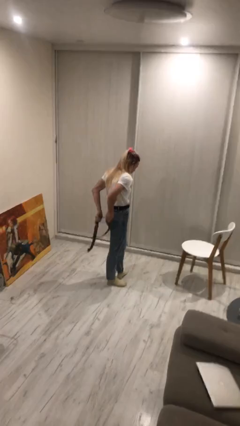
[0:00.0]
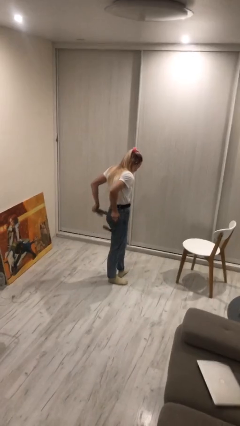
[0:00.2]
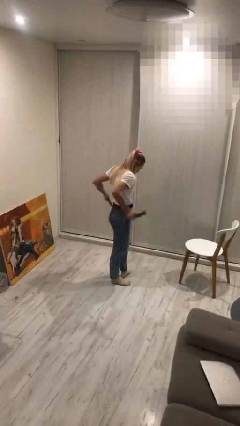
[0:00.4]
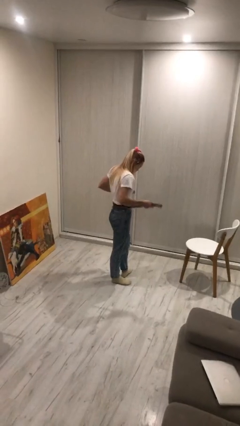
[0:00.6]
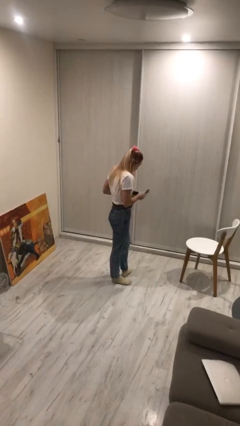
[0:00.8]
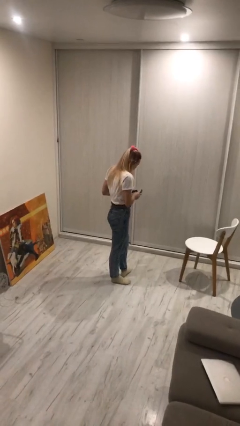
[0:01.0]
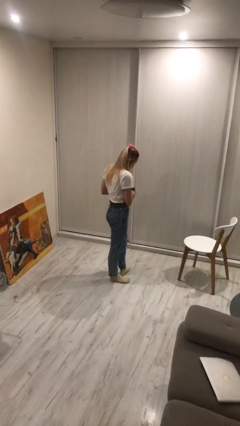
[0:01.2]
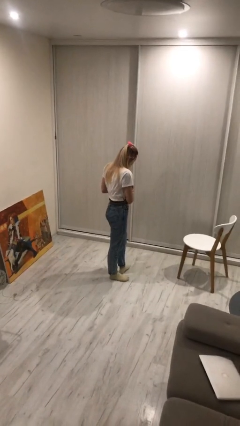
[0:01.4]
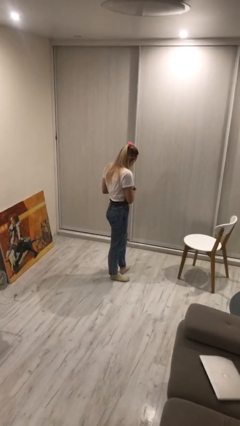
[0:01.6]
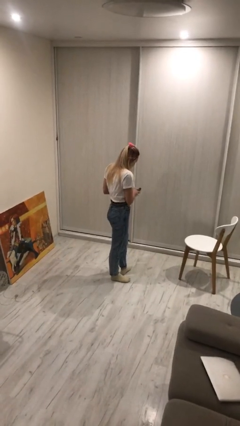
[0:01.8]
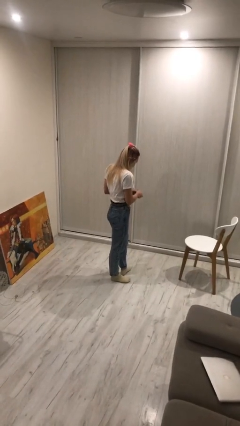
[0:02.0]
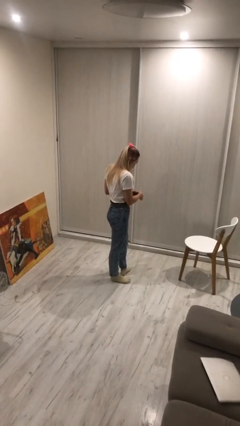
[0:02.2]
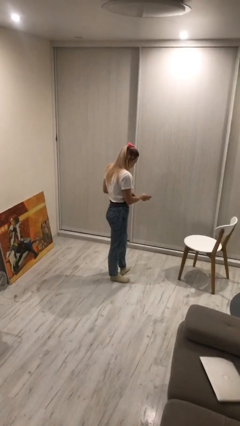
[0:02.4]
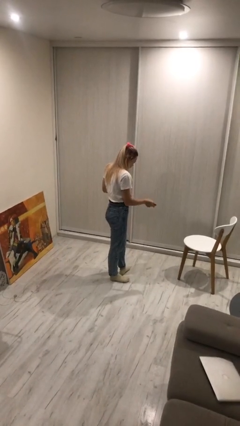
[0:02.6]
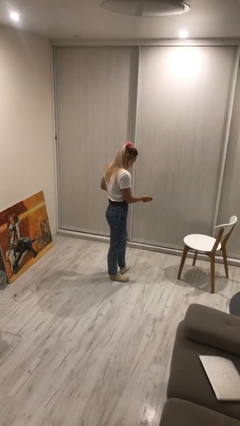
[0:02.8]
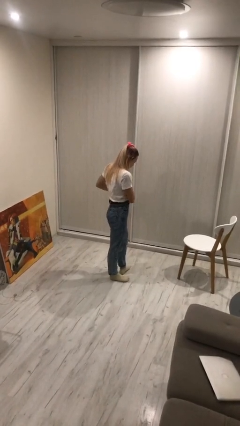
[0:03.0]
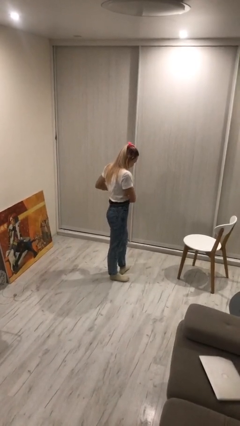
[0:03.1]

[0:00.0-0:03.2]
person puts on belt

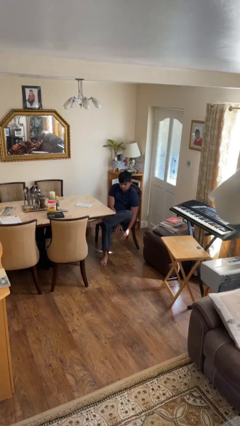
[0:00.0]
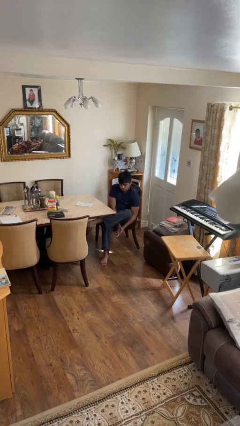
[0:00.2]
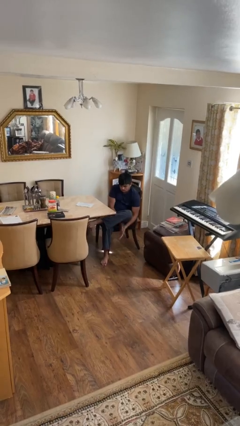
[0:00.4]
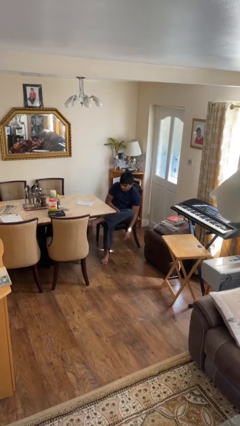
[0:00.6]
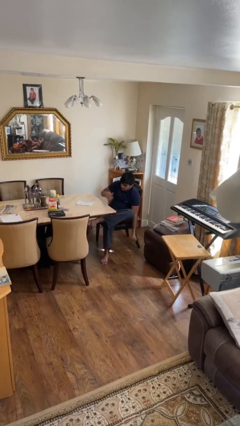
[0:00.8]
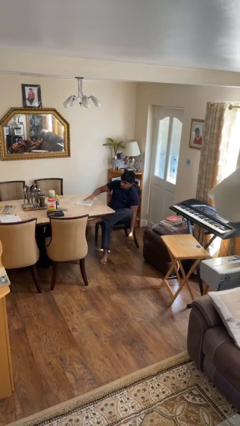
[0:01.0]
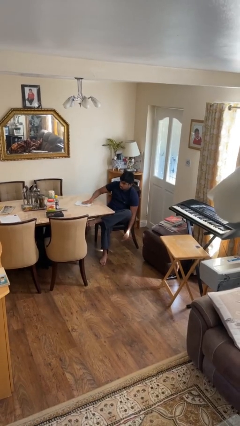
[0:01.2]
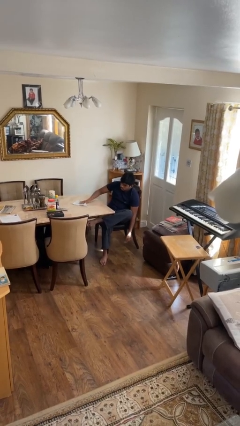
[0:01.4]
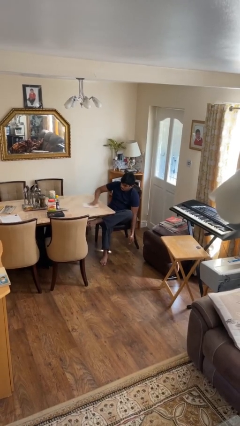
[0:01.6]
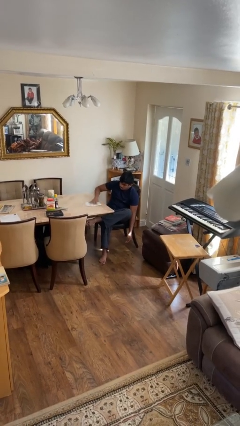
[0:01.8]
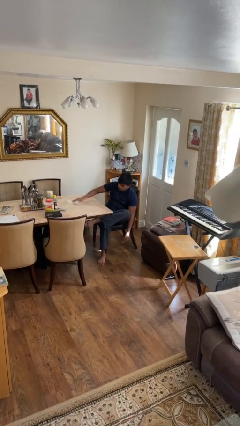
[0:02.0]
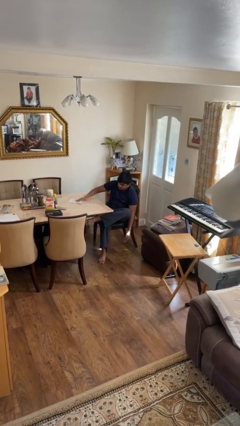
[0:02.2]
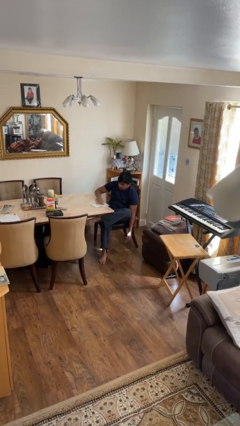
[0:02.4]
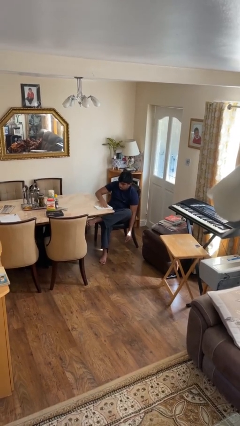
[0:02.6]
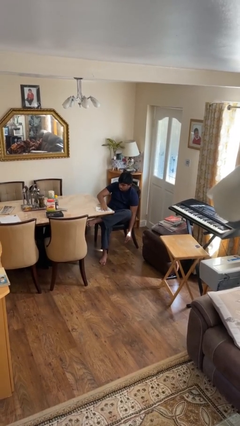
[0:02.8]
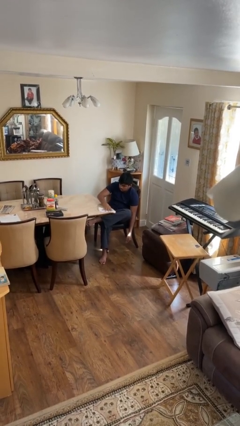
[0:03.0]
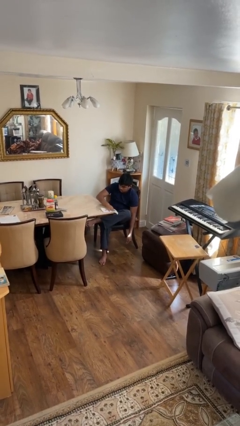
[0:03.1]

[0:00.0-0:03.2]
person cleans table with rag

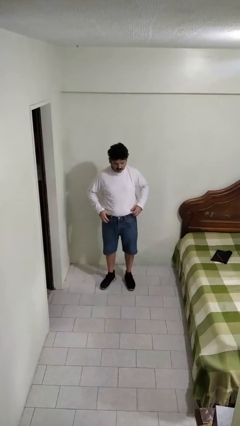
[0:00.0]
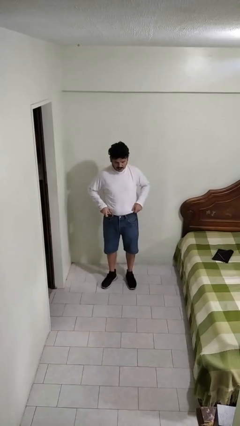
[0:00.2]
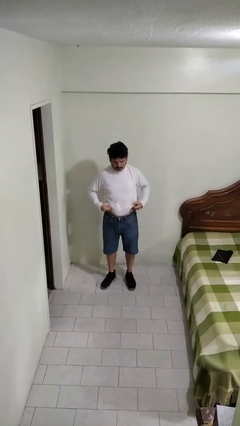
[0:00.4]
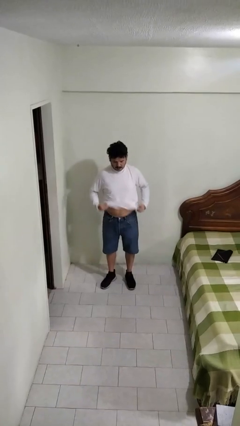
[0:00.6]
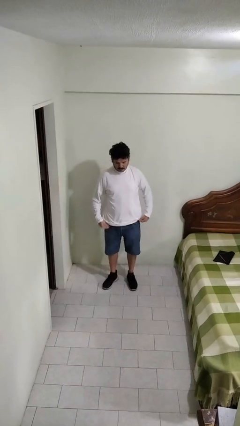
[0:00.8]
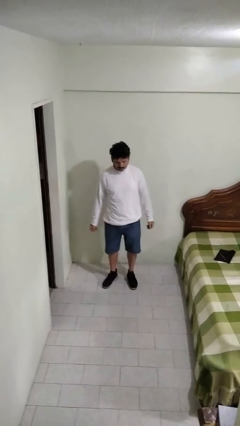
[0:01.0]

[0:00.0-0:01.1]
person untucks shirt

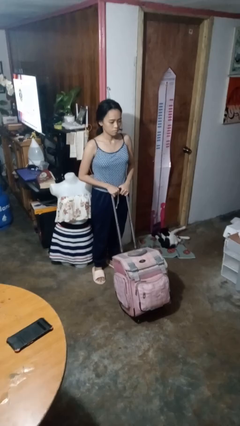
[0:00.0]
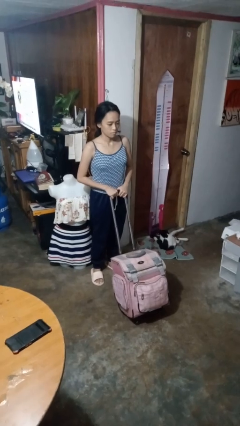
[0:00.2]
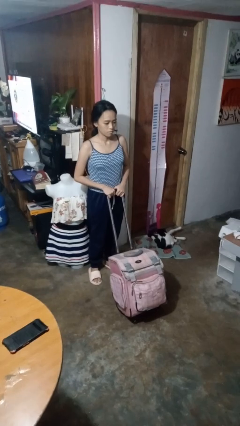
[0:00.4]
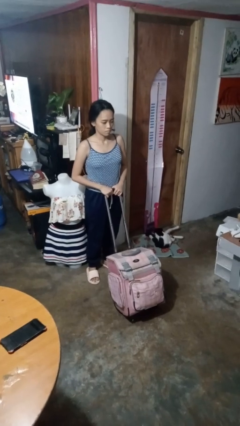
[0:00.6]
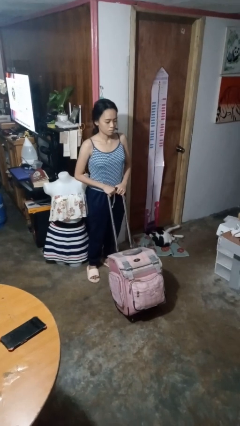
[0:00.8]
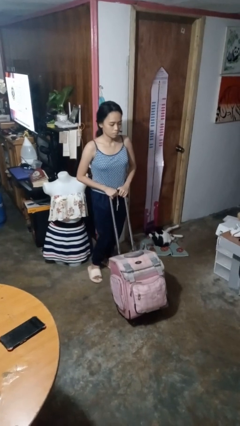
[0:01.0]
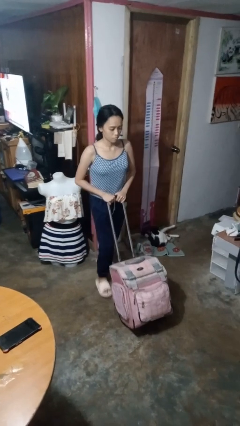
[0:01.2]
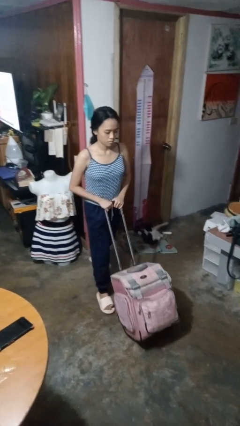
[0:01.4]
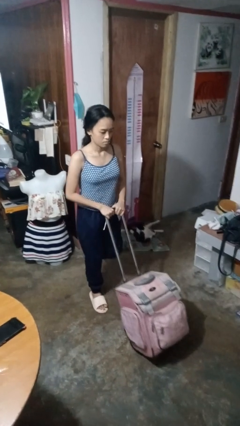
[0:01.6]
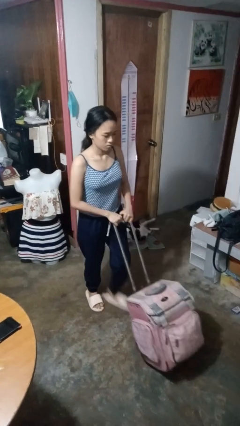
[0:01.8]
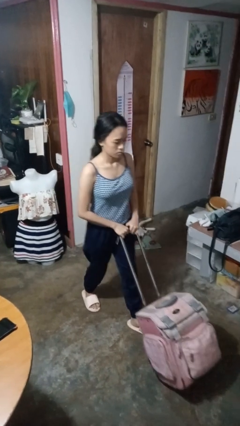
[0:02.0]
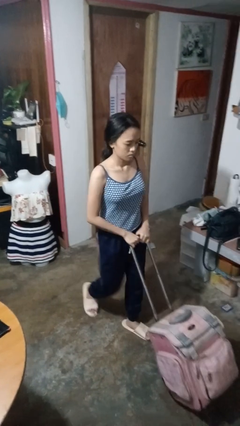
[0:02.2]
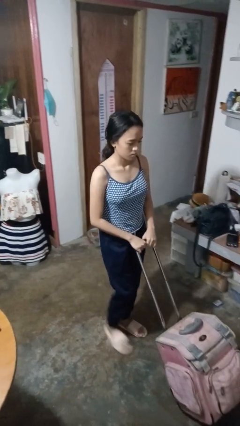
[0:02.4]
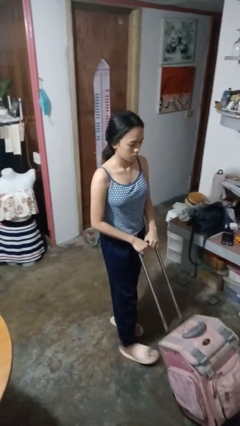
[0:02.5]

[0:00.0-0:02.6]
person pushes wheeled cart

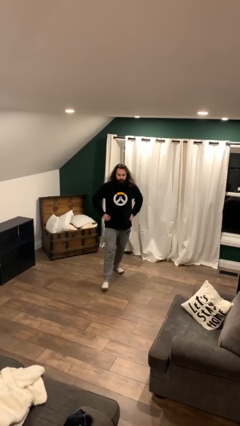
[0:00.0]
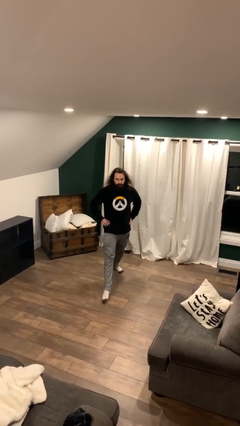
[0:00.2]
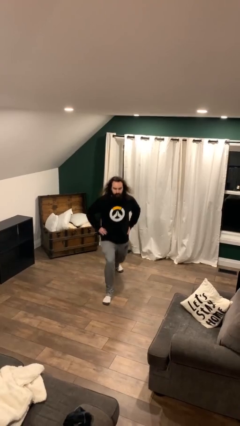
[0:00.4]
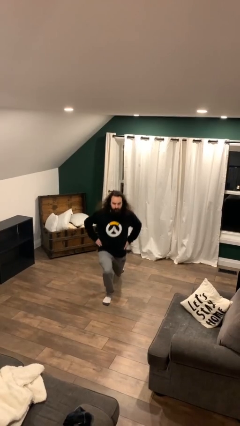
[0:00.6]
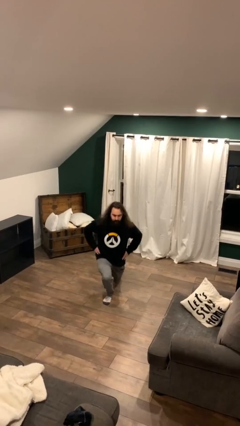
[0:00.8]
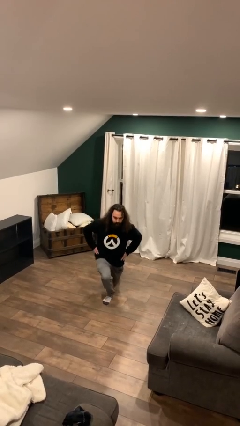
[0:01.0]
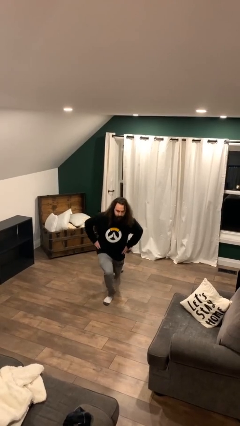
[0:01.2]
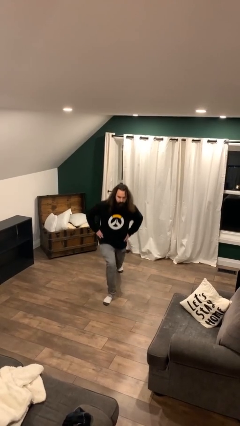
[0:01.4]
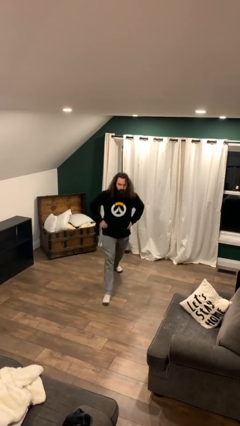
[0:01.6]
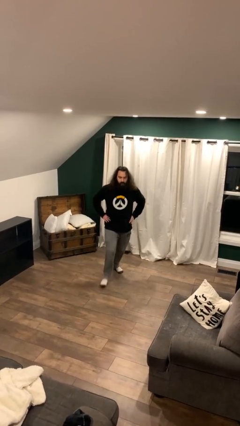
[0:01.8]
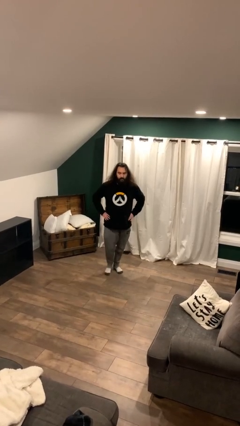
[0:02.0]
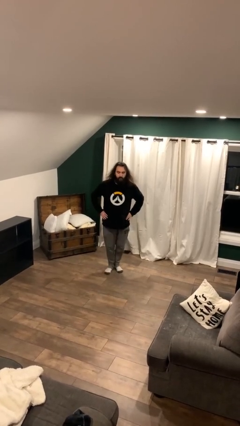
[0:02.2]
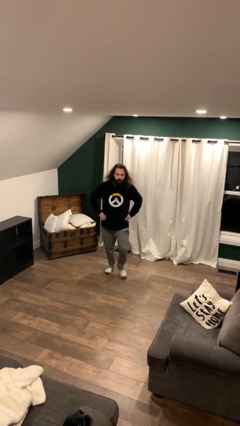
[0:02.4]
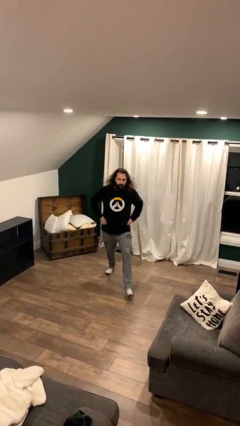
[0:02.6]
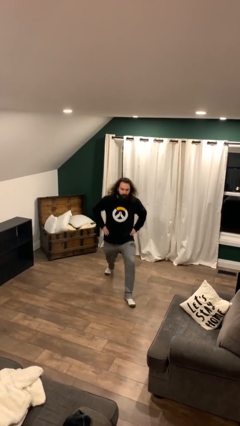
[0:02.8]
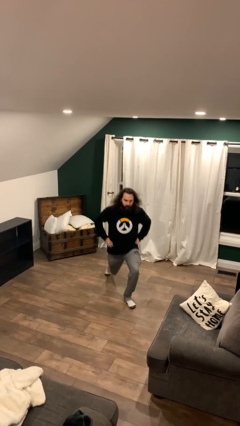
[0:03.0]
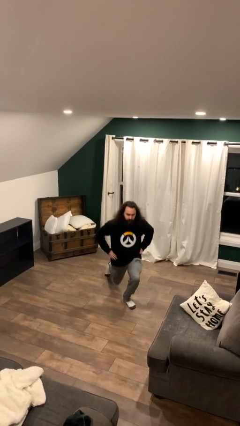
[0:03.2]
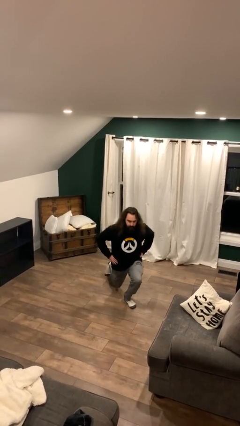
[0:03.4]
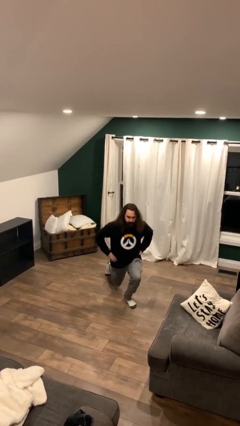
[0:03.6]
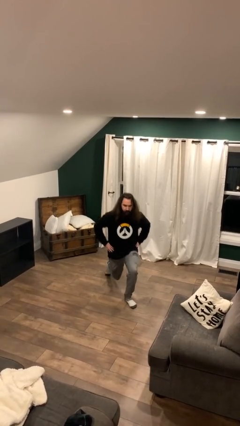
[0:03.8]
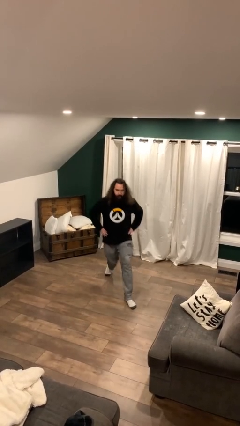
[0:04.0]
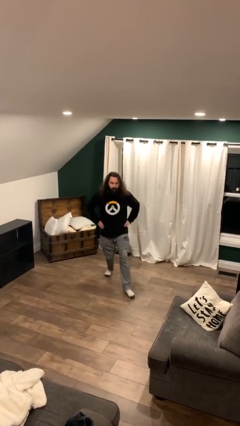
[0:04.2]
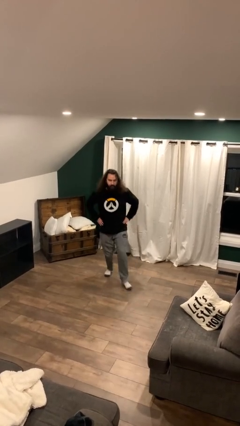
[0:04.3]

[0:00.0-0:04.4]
person exercises with lunges

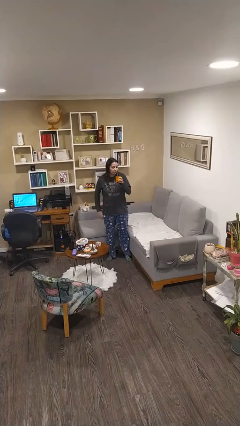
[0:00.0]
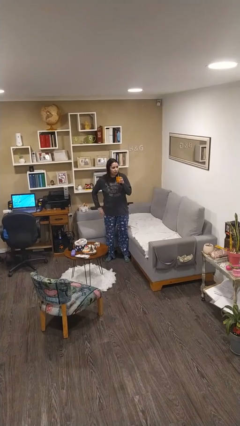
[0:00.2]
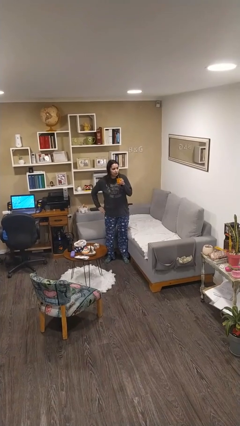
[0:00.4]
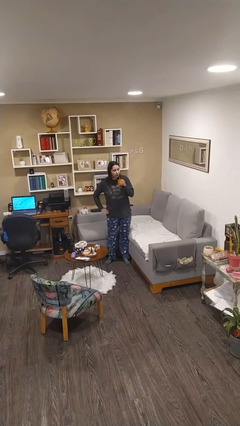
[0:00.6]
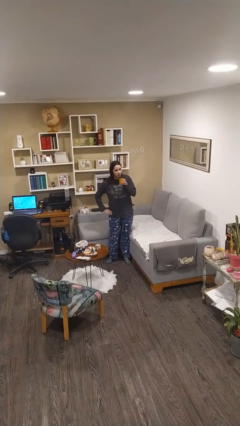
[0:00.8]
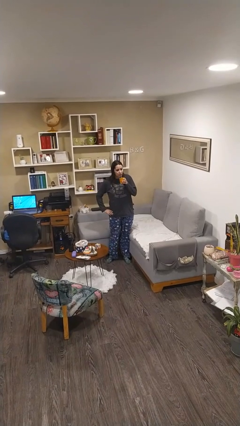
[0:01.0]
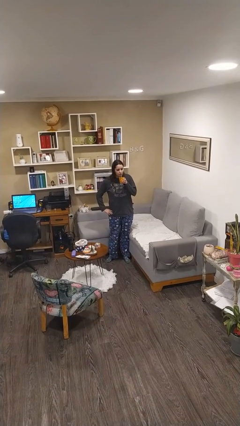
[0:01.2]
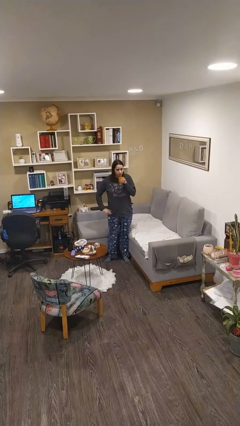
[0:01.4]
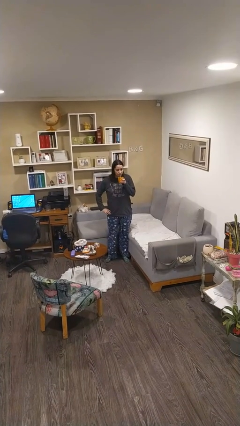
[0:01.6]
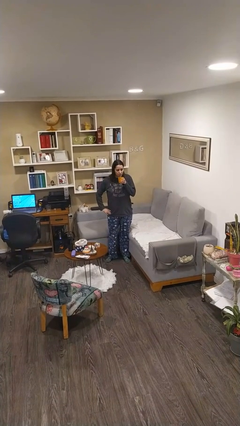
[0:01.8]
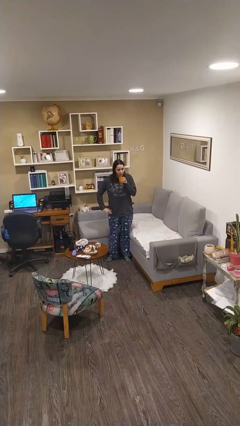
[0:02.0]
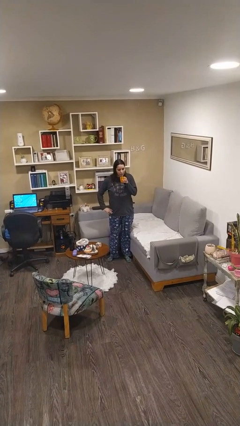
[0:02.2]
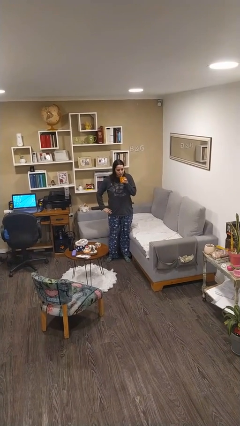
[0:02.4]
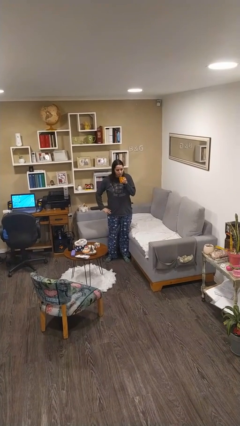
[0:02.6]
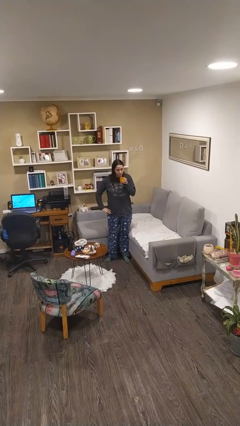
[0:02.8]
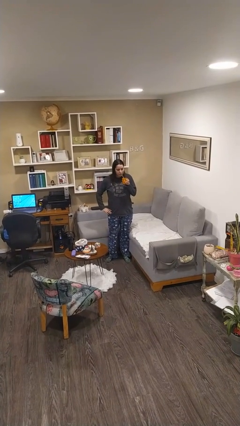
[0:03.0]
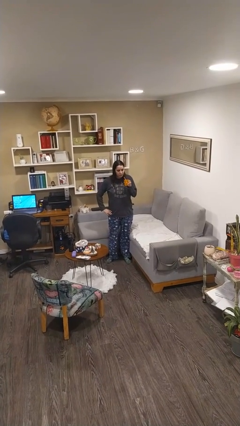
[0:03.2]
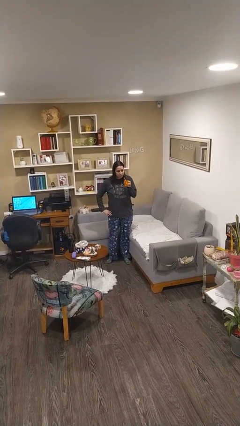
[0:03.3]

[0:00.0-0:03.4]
person drinks from straw
